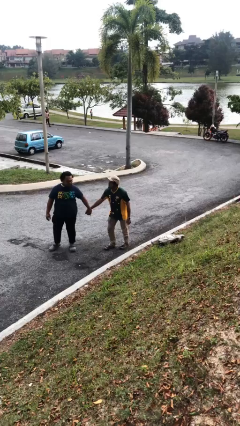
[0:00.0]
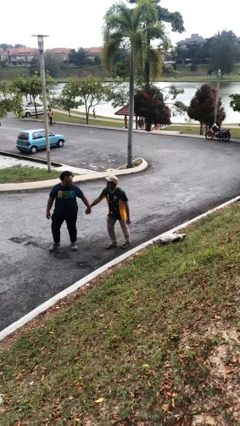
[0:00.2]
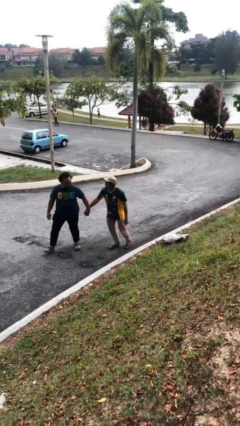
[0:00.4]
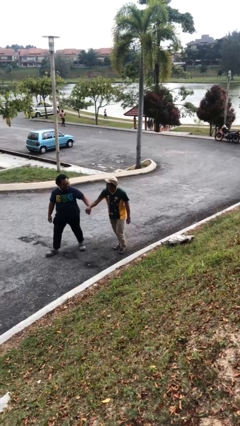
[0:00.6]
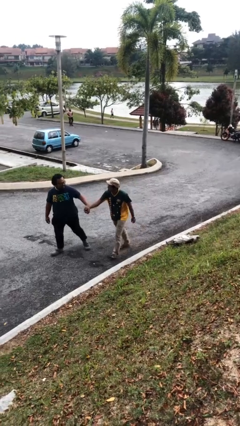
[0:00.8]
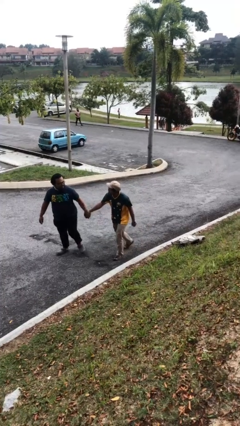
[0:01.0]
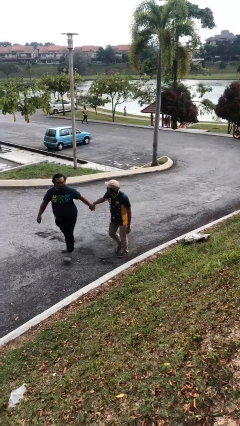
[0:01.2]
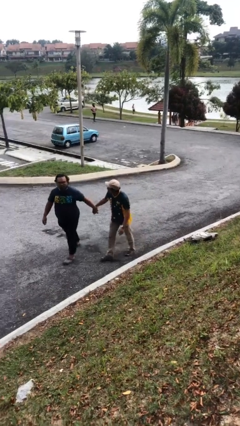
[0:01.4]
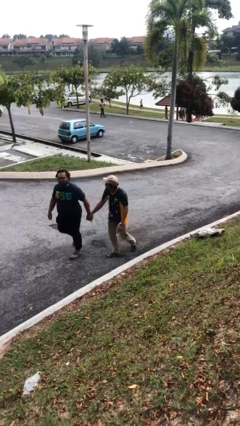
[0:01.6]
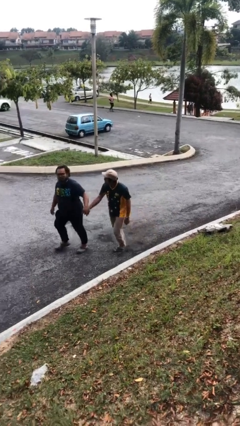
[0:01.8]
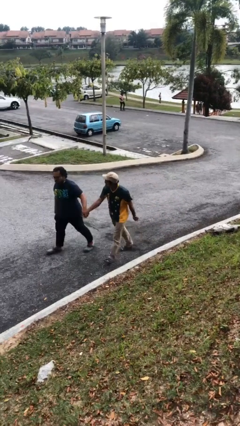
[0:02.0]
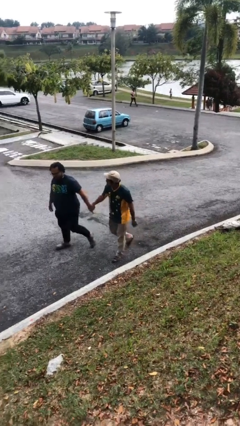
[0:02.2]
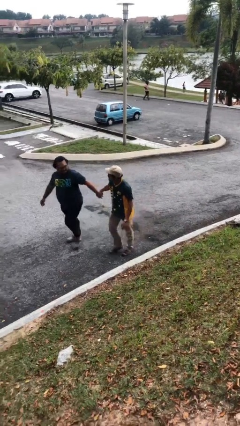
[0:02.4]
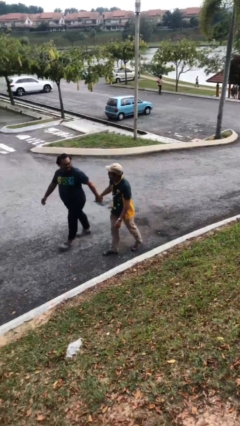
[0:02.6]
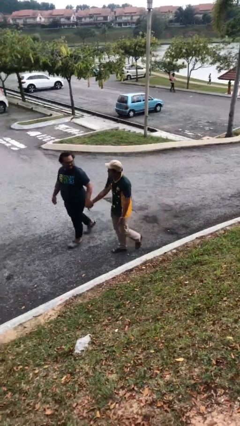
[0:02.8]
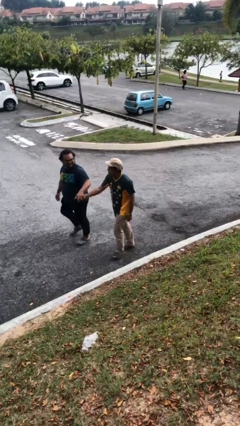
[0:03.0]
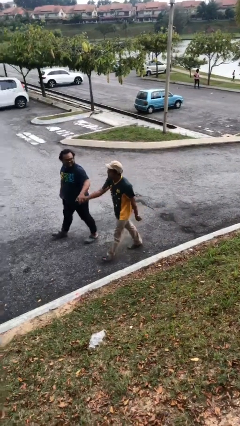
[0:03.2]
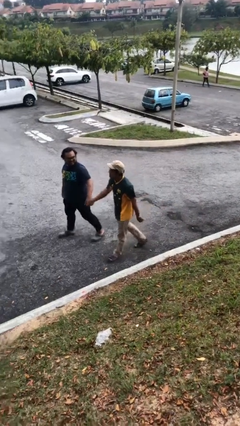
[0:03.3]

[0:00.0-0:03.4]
person holds hand

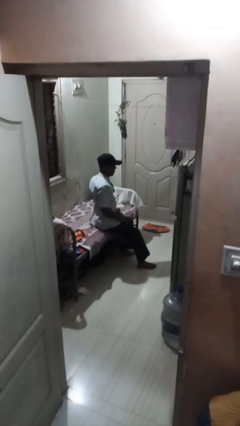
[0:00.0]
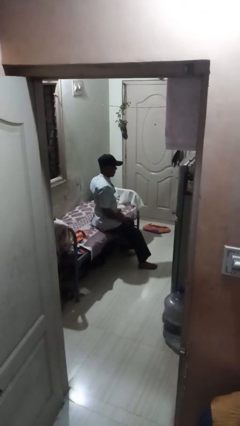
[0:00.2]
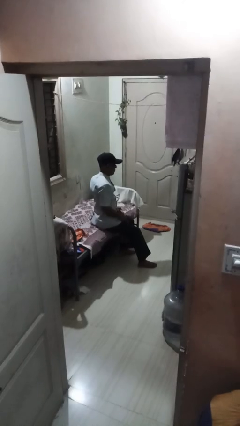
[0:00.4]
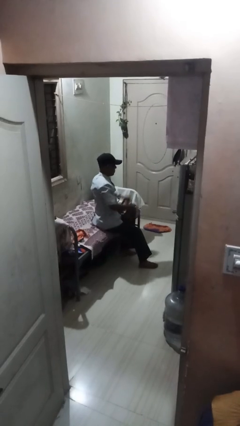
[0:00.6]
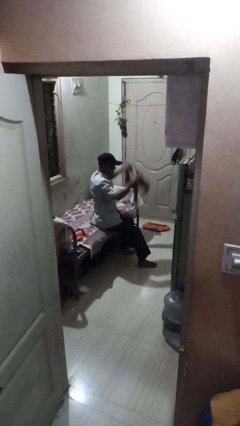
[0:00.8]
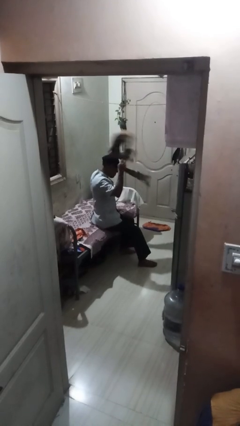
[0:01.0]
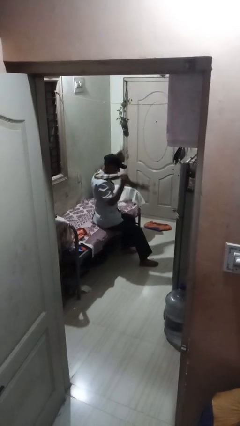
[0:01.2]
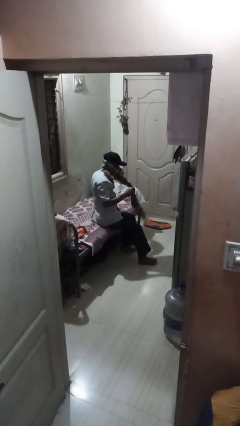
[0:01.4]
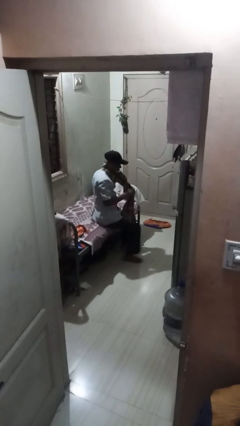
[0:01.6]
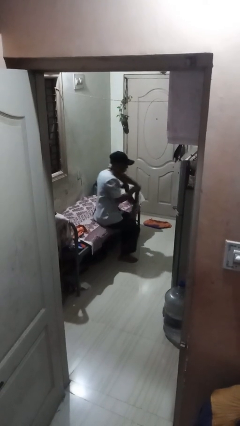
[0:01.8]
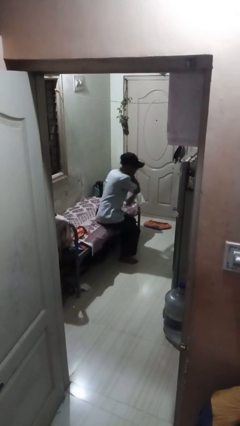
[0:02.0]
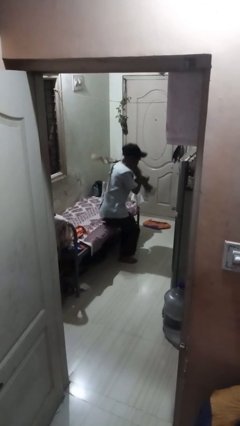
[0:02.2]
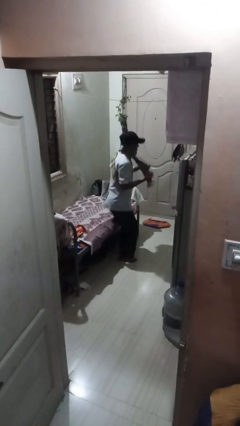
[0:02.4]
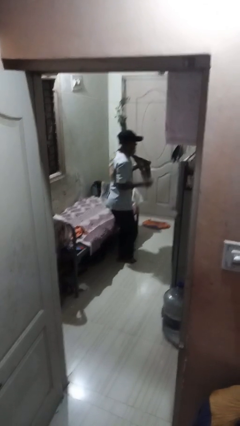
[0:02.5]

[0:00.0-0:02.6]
person puts on scarf

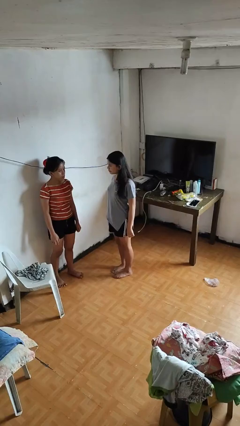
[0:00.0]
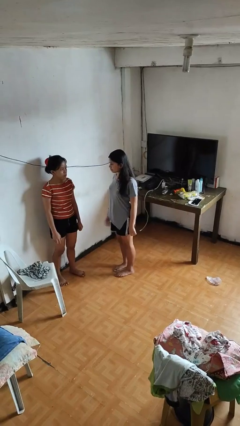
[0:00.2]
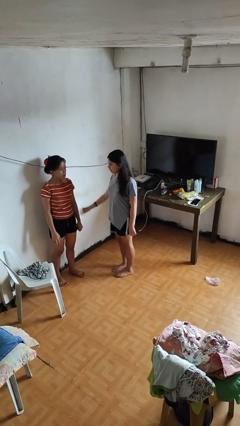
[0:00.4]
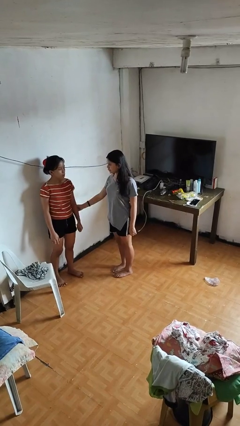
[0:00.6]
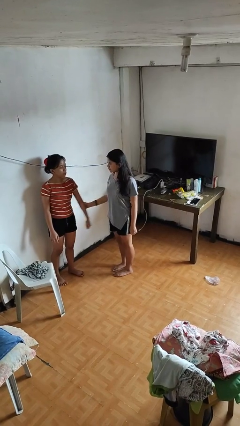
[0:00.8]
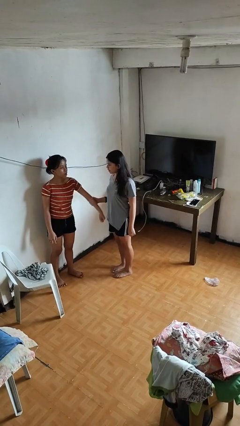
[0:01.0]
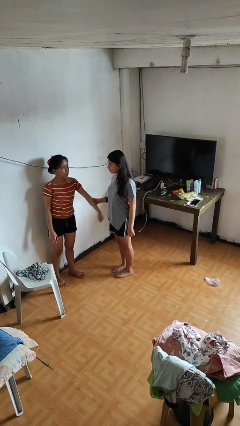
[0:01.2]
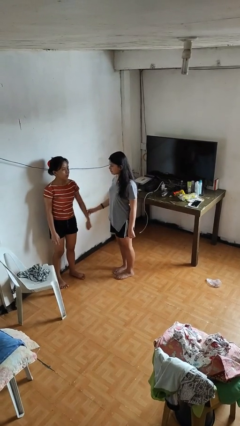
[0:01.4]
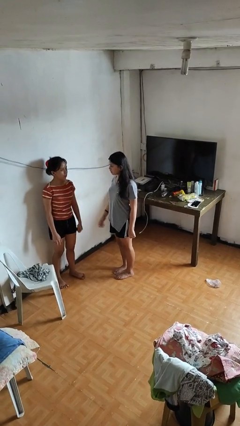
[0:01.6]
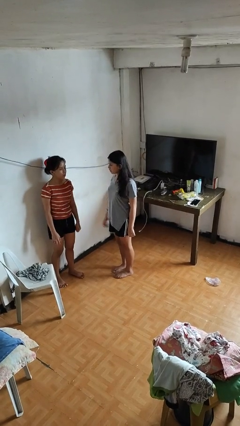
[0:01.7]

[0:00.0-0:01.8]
person grabs person by forearm

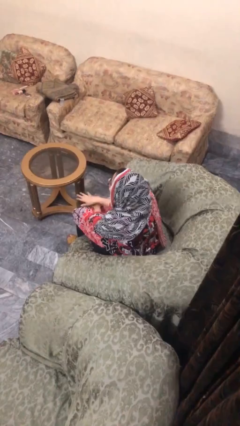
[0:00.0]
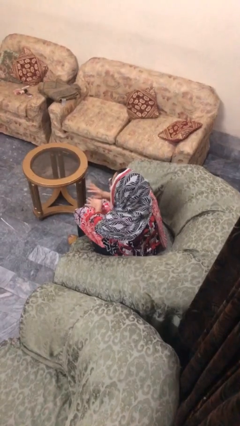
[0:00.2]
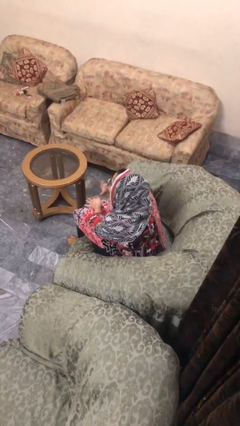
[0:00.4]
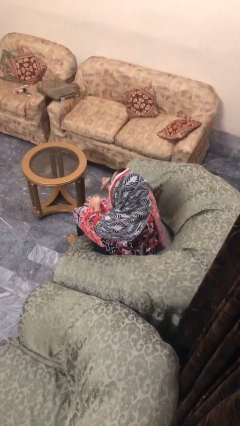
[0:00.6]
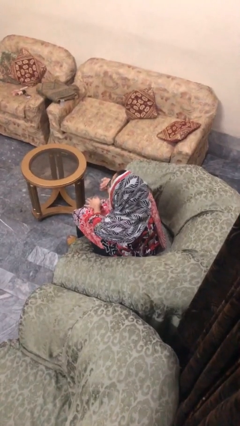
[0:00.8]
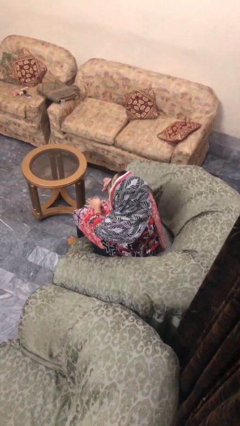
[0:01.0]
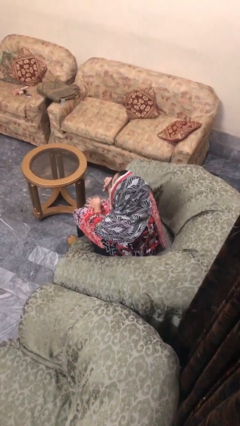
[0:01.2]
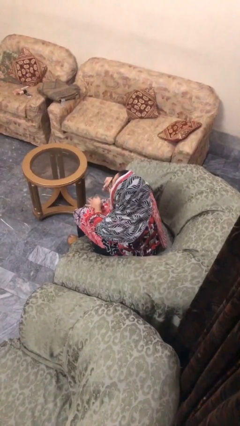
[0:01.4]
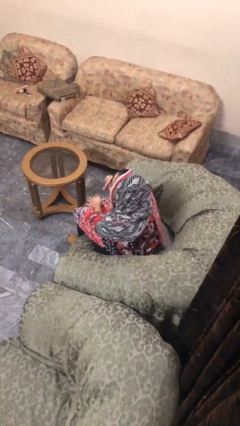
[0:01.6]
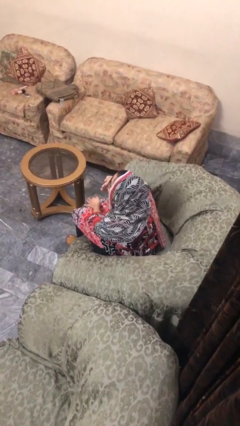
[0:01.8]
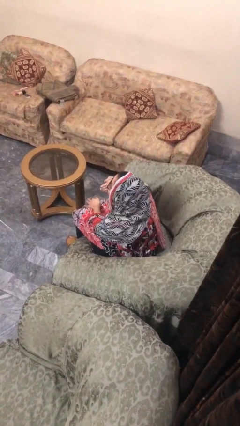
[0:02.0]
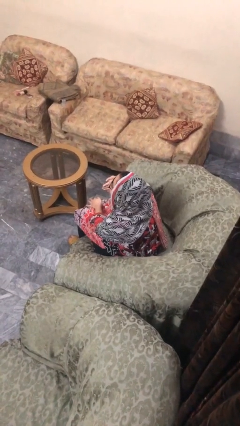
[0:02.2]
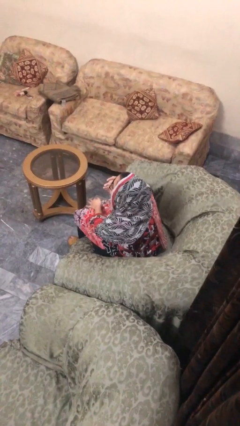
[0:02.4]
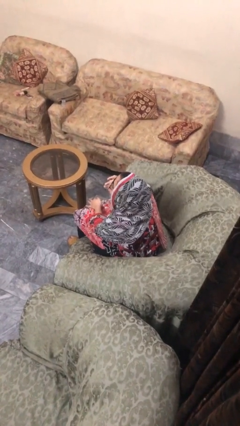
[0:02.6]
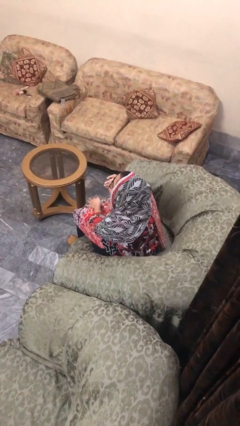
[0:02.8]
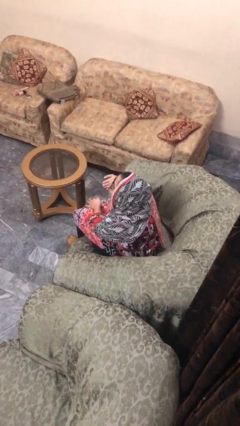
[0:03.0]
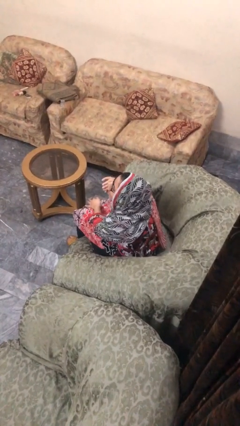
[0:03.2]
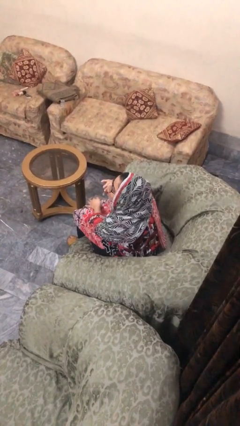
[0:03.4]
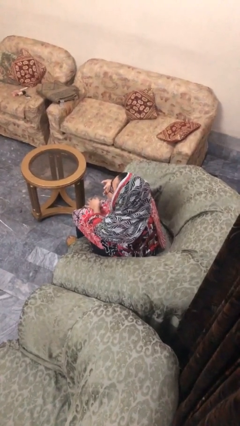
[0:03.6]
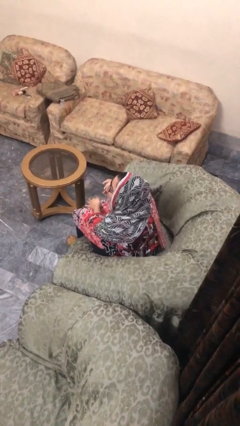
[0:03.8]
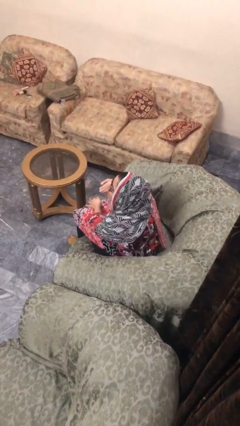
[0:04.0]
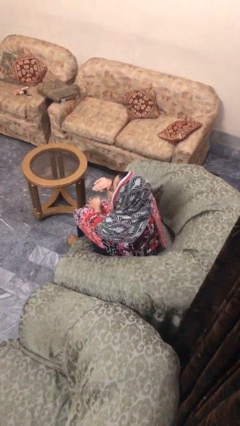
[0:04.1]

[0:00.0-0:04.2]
person yawns

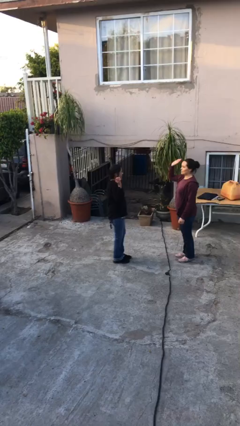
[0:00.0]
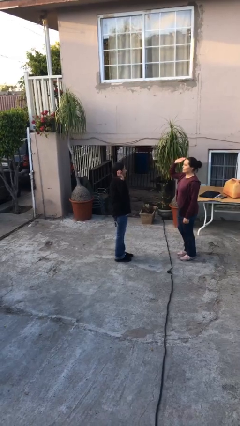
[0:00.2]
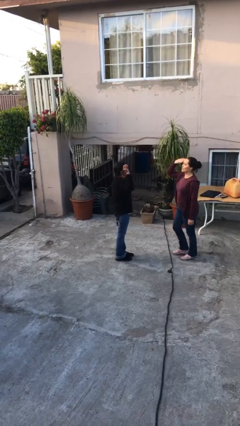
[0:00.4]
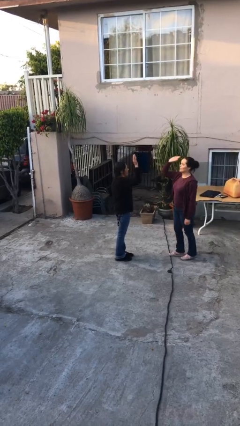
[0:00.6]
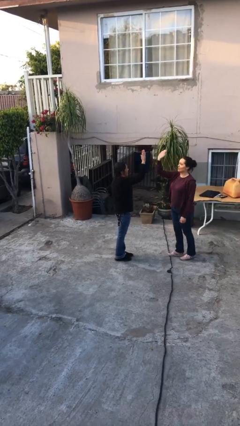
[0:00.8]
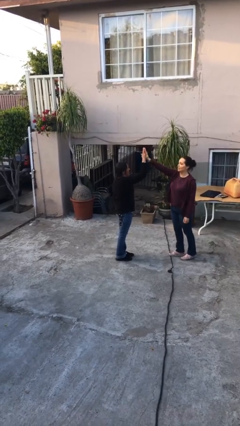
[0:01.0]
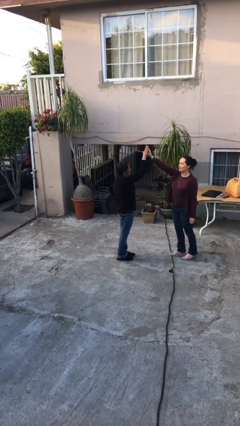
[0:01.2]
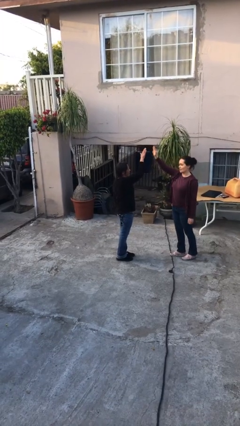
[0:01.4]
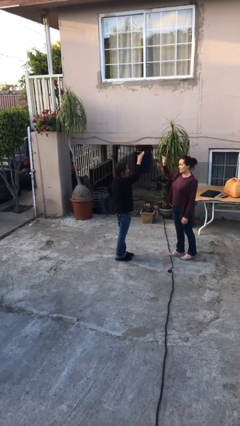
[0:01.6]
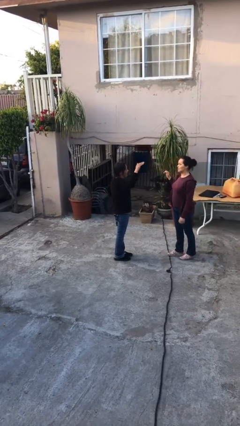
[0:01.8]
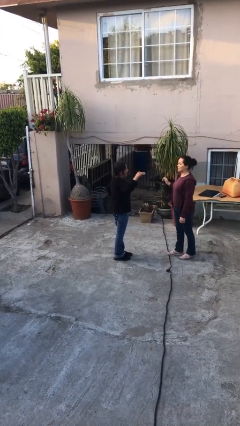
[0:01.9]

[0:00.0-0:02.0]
person highfives hand

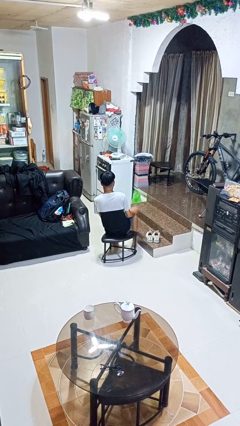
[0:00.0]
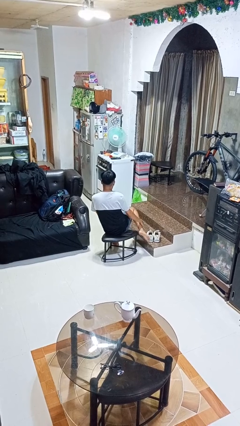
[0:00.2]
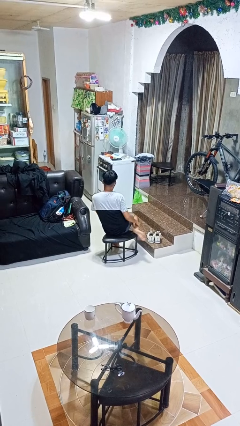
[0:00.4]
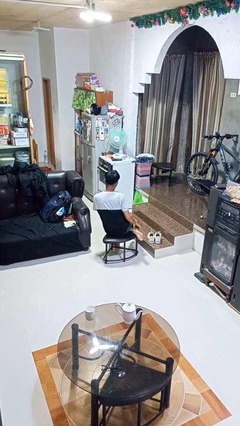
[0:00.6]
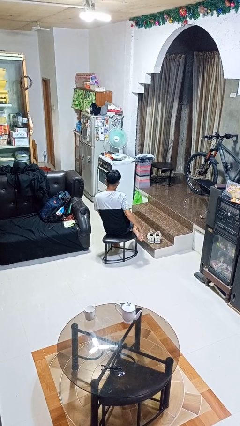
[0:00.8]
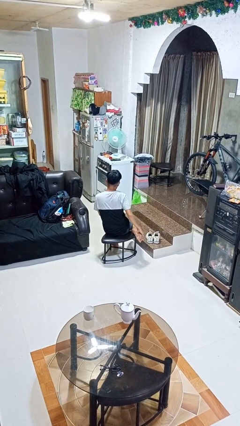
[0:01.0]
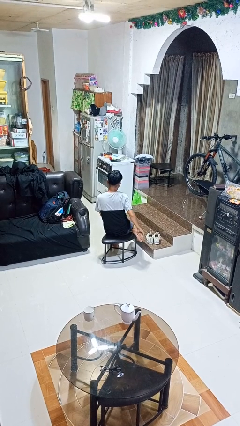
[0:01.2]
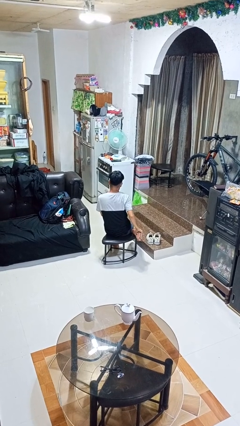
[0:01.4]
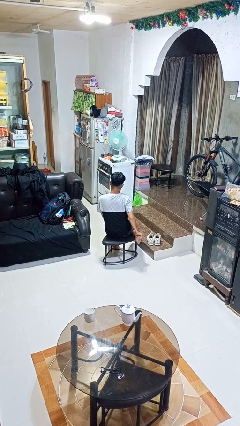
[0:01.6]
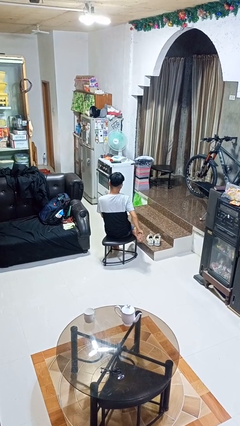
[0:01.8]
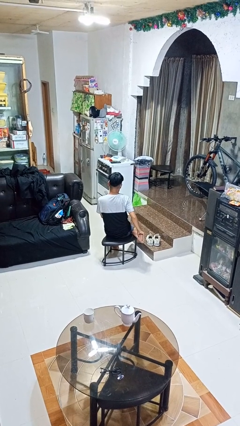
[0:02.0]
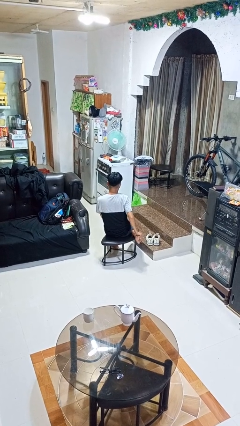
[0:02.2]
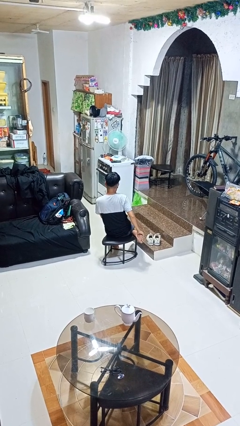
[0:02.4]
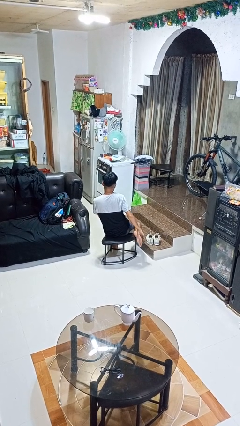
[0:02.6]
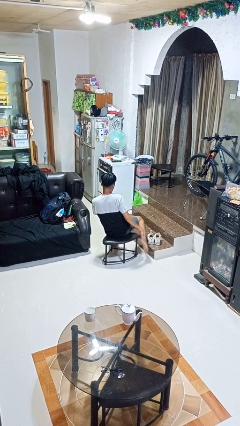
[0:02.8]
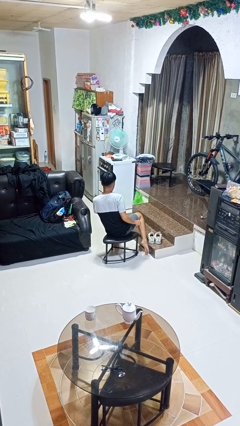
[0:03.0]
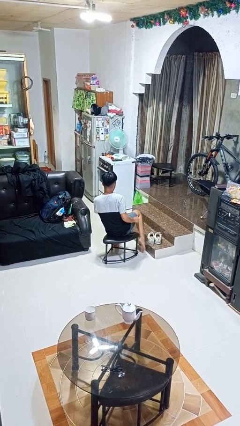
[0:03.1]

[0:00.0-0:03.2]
person rubs foot

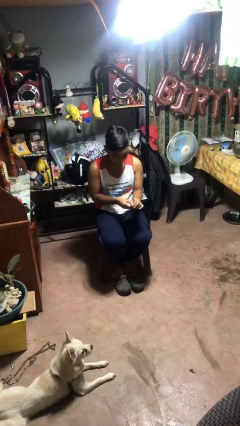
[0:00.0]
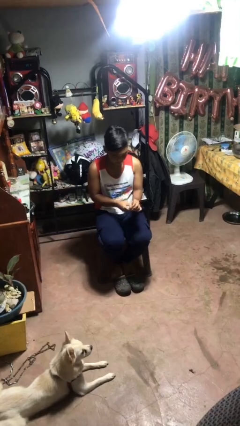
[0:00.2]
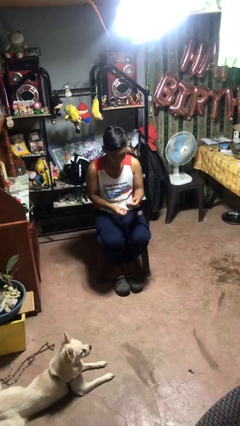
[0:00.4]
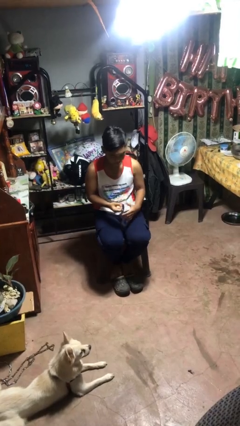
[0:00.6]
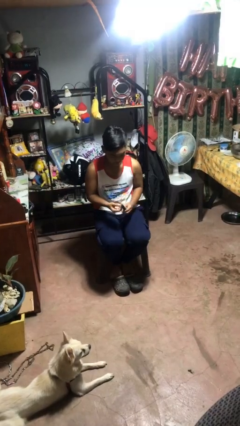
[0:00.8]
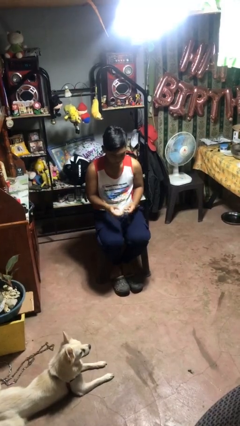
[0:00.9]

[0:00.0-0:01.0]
person takes off wristwatch
